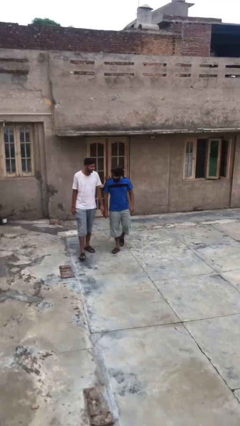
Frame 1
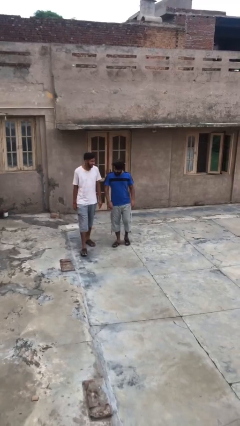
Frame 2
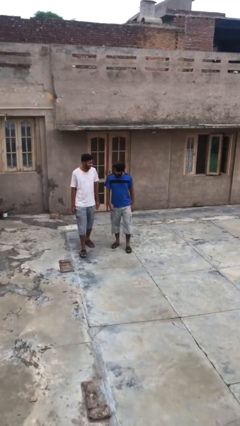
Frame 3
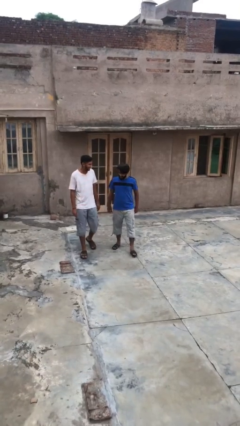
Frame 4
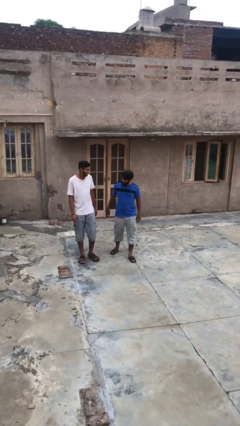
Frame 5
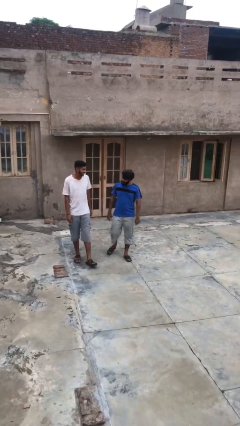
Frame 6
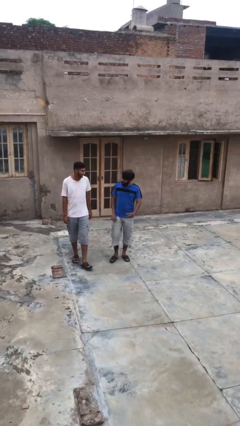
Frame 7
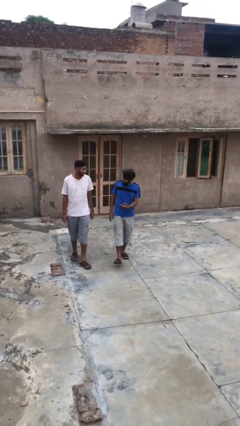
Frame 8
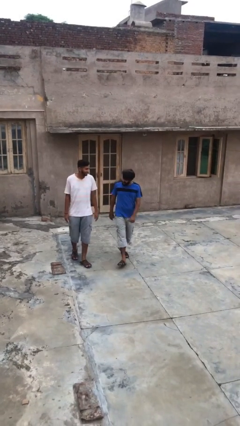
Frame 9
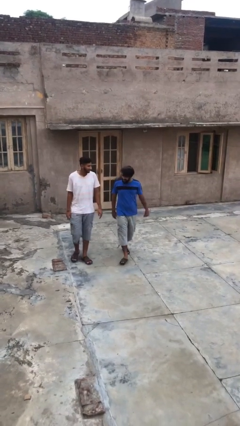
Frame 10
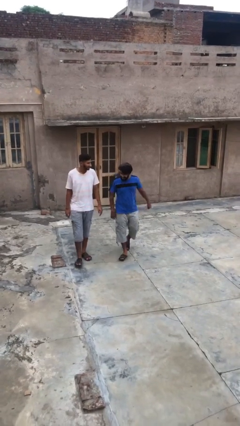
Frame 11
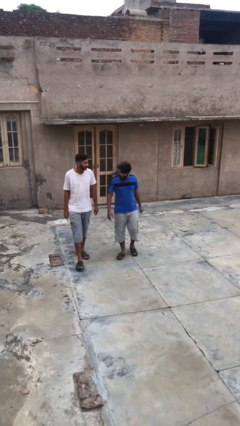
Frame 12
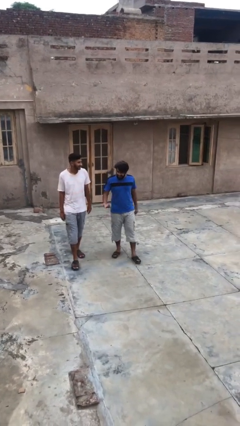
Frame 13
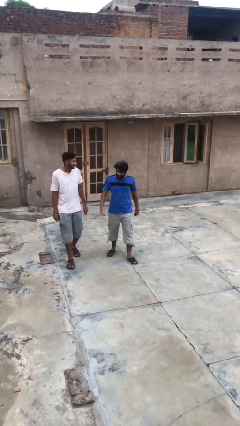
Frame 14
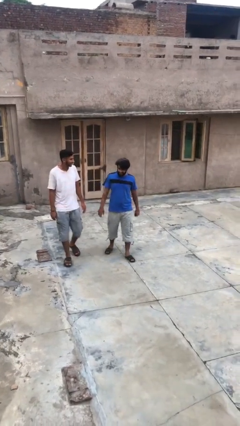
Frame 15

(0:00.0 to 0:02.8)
person talks to person

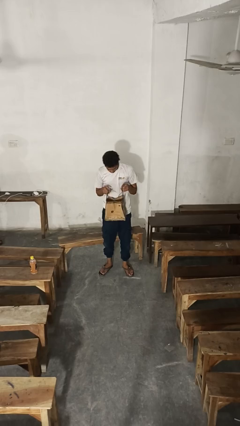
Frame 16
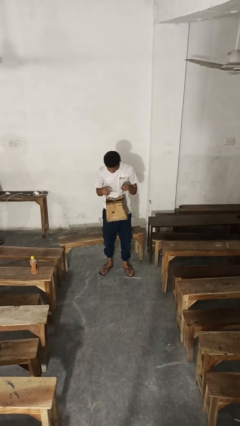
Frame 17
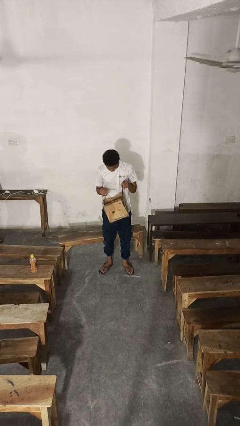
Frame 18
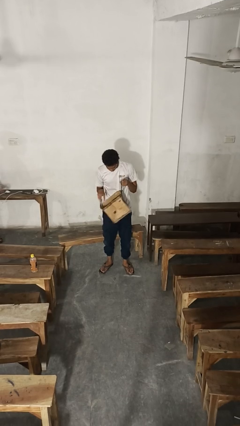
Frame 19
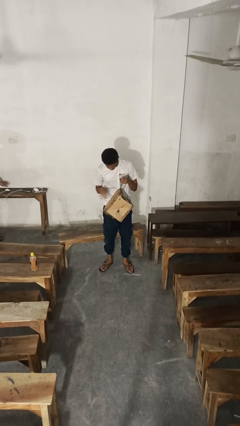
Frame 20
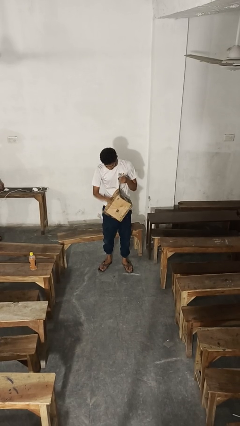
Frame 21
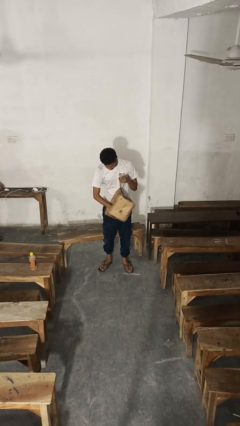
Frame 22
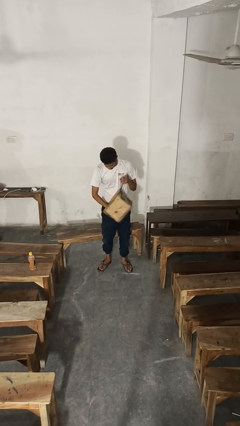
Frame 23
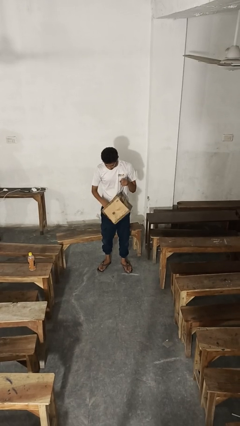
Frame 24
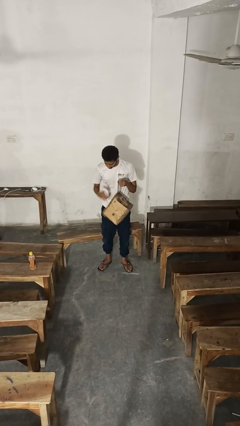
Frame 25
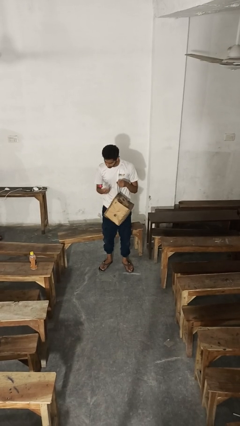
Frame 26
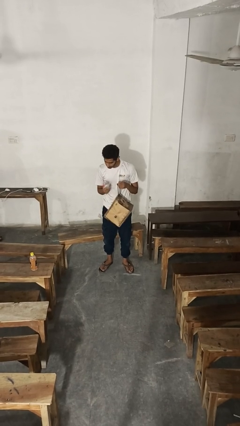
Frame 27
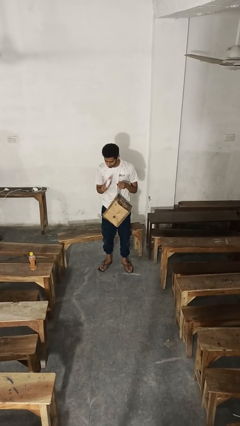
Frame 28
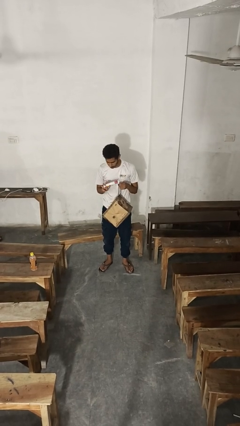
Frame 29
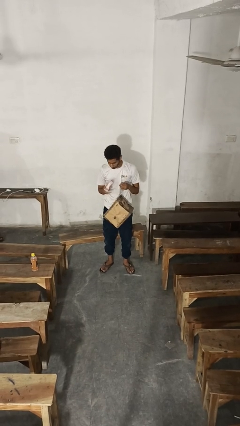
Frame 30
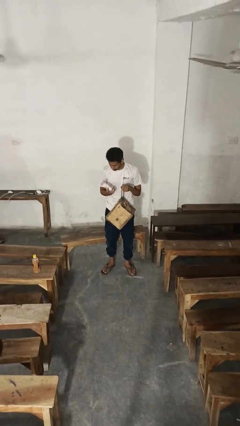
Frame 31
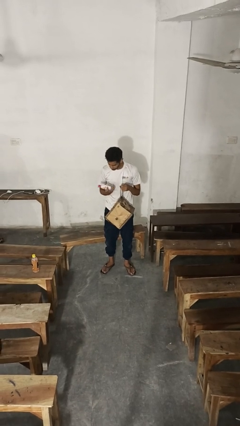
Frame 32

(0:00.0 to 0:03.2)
person takes object from purse

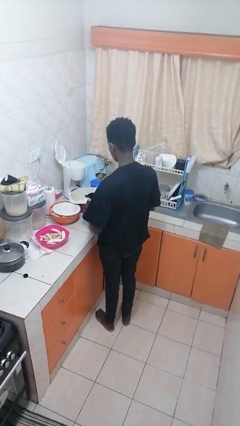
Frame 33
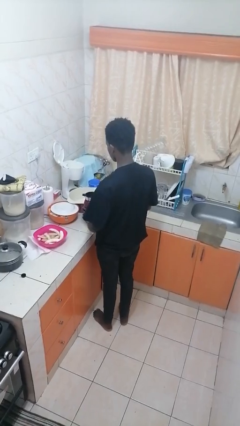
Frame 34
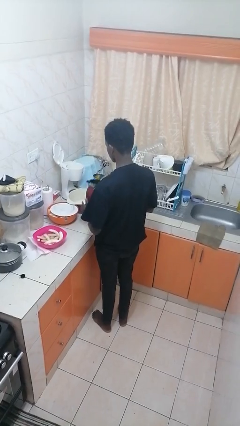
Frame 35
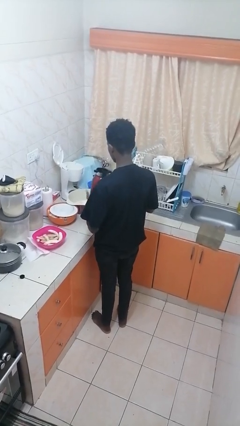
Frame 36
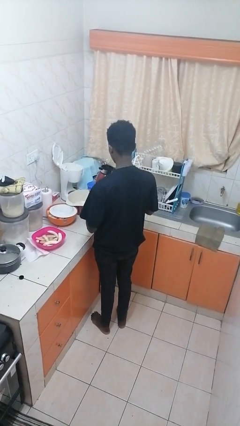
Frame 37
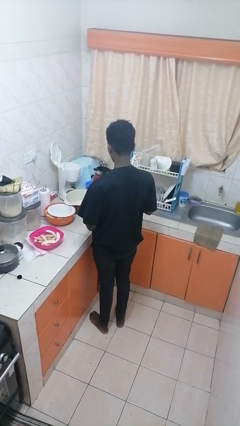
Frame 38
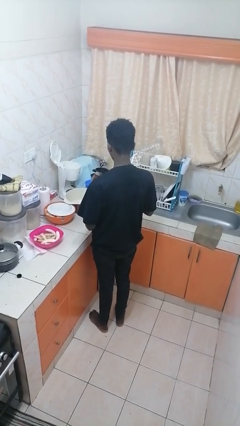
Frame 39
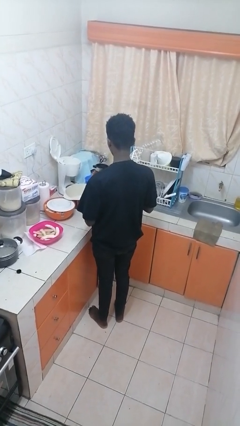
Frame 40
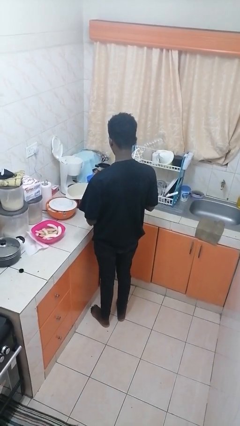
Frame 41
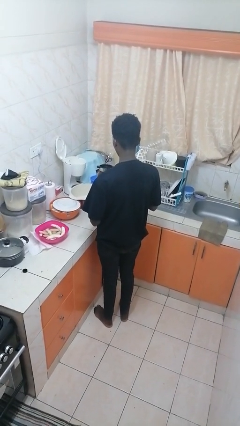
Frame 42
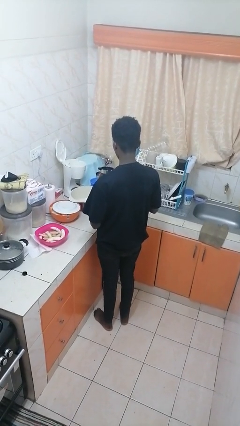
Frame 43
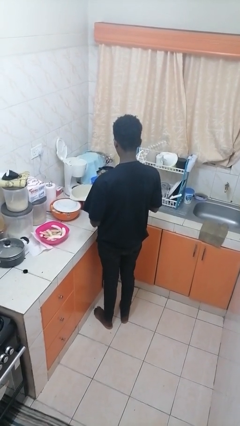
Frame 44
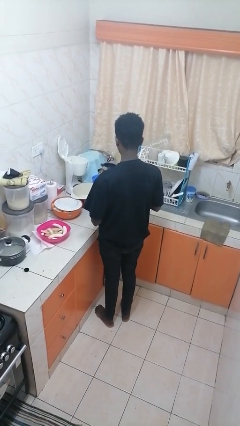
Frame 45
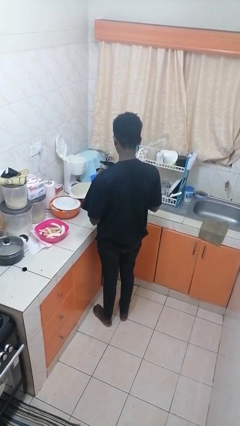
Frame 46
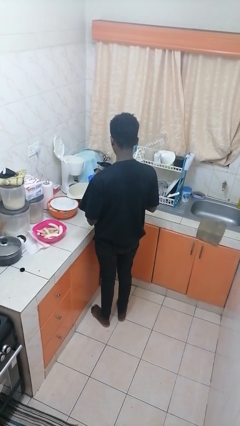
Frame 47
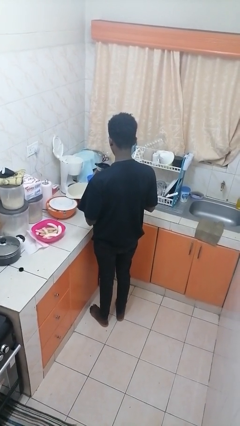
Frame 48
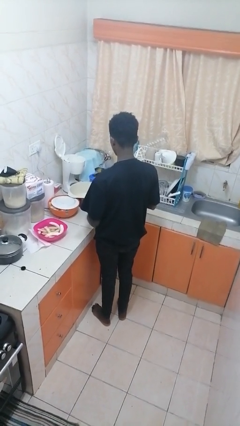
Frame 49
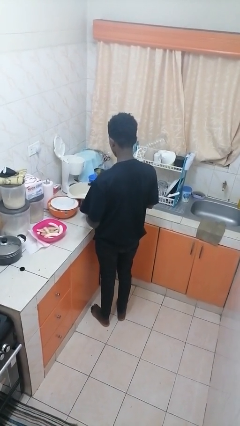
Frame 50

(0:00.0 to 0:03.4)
person picks up object from countertop

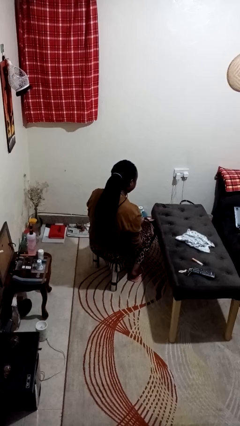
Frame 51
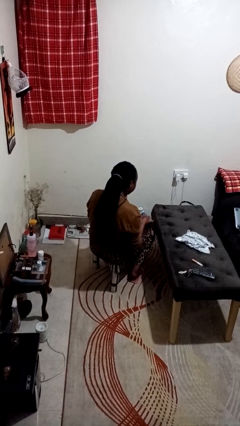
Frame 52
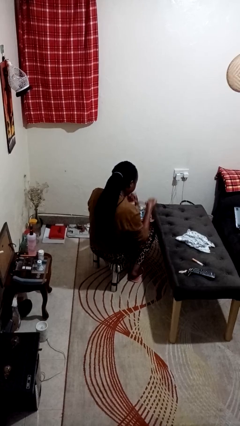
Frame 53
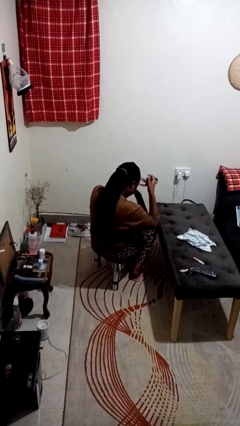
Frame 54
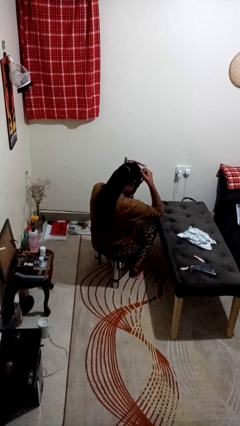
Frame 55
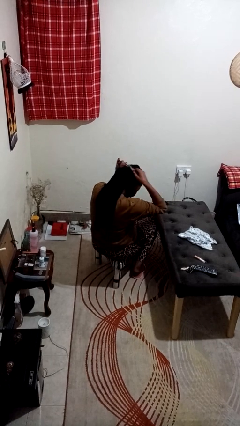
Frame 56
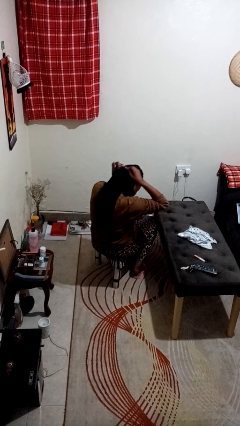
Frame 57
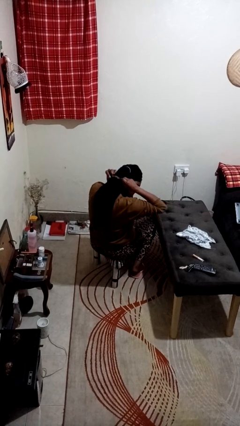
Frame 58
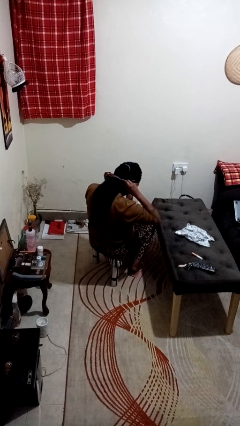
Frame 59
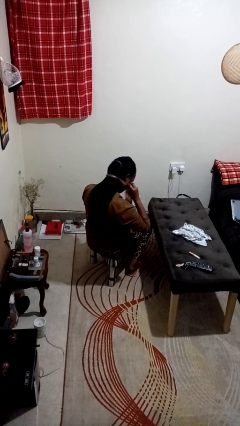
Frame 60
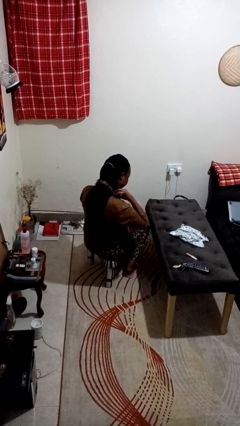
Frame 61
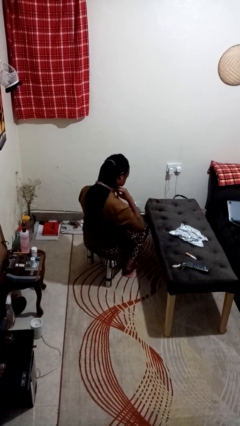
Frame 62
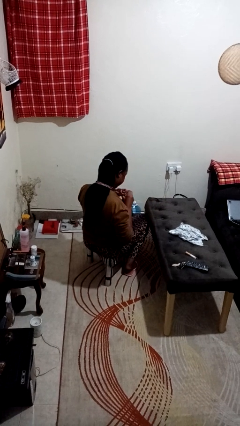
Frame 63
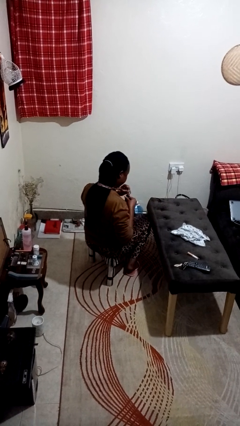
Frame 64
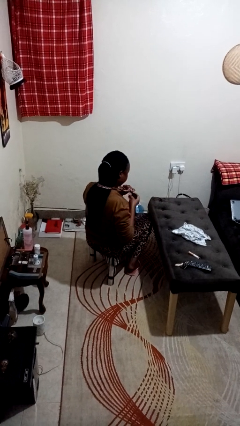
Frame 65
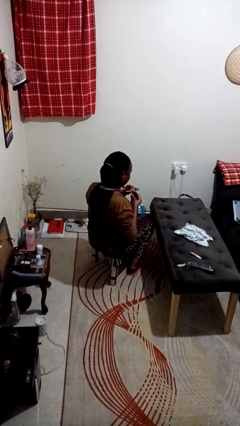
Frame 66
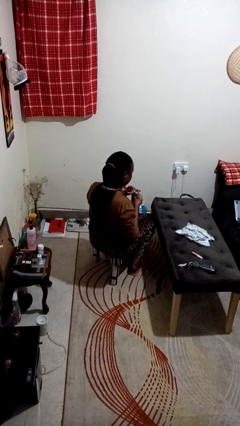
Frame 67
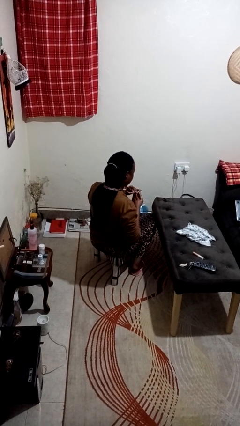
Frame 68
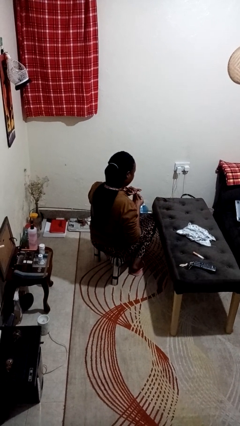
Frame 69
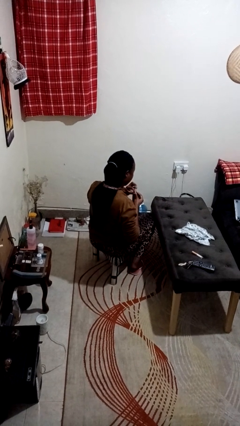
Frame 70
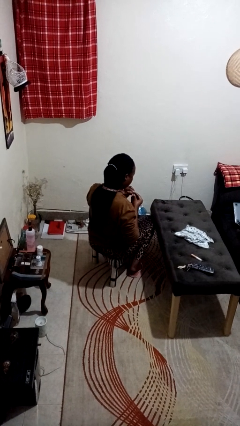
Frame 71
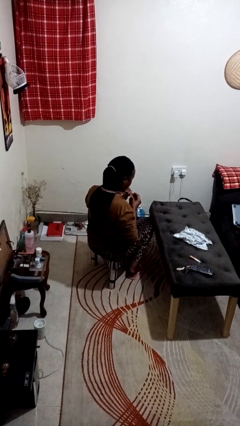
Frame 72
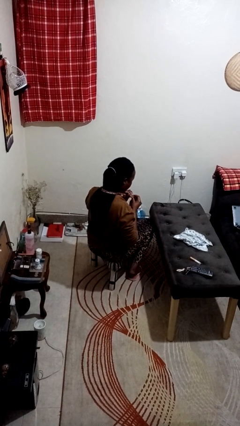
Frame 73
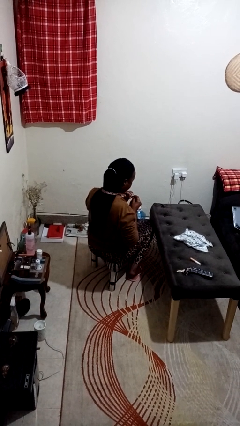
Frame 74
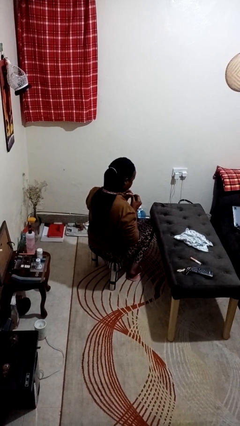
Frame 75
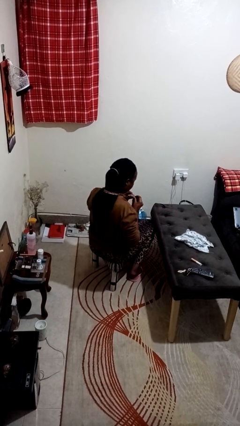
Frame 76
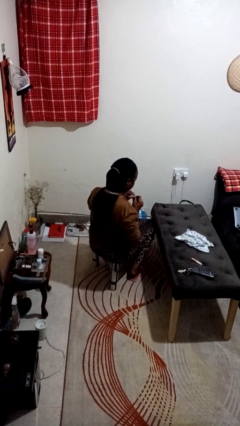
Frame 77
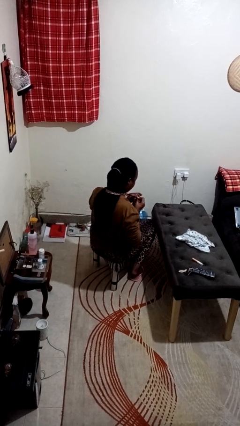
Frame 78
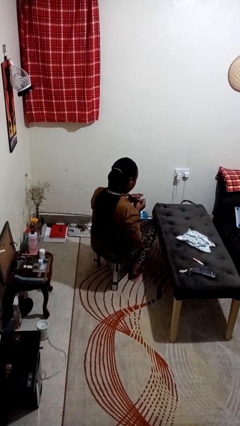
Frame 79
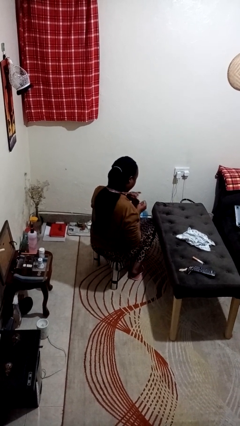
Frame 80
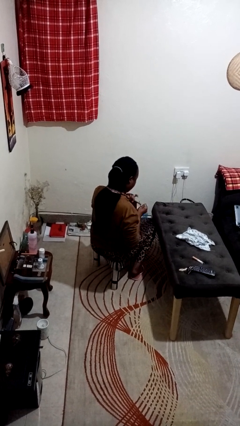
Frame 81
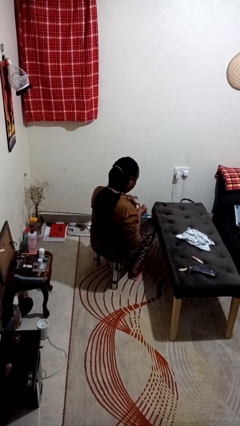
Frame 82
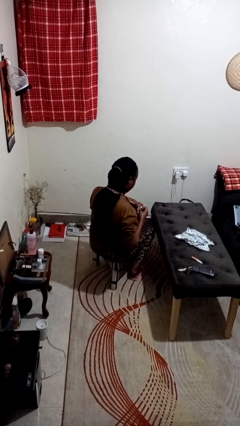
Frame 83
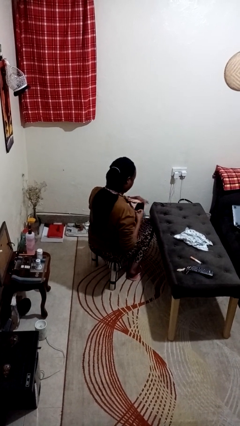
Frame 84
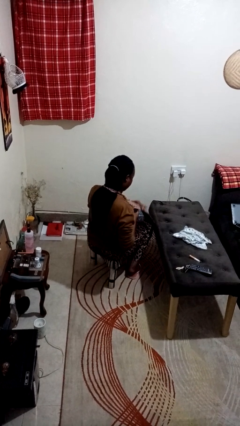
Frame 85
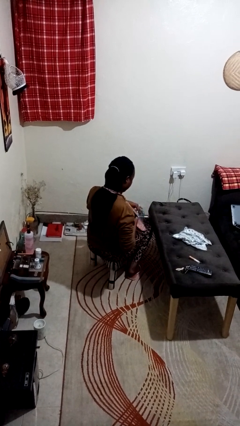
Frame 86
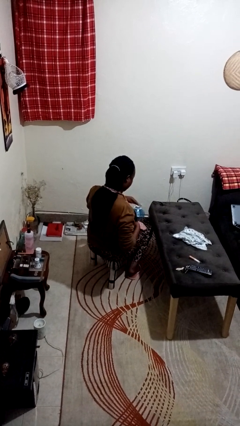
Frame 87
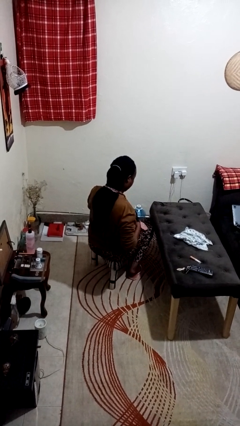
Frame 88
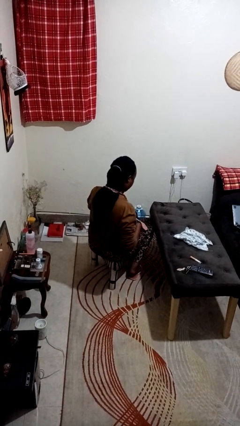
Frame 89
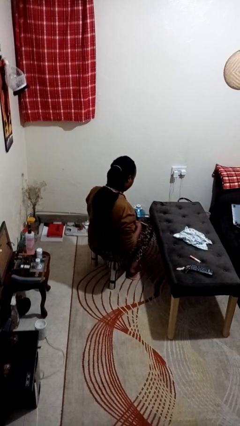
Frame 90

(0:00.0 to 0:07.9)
person puts on necktie

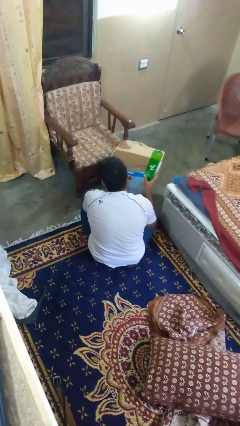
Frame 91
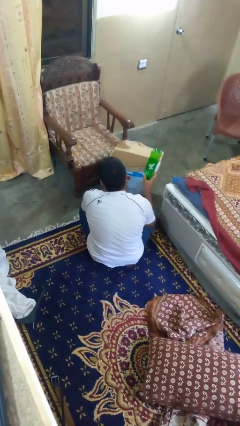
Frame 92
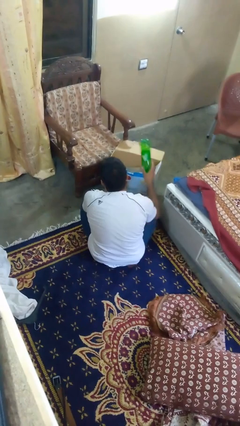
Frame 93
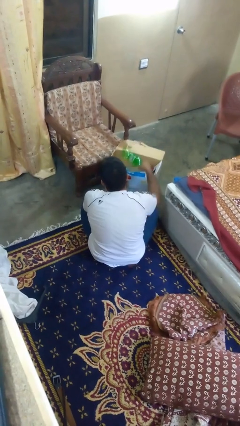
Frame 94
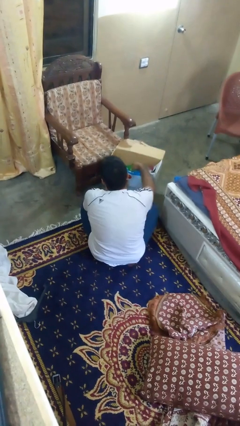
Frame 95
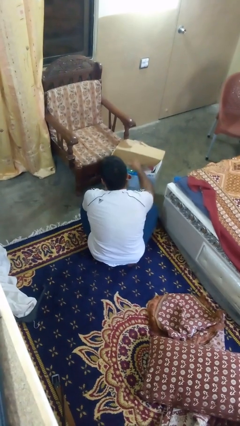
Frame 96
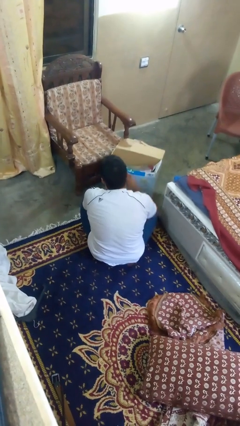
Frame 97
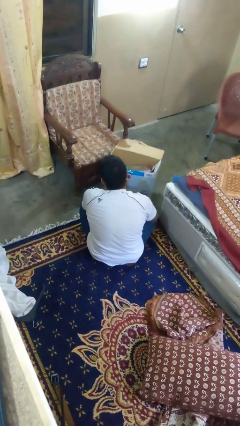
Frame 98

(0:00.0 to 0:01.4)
person puts object into box
